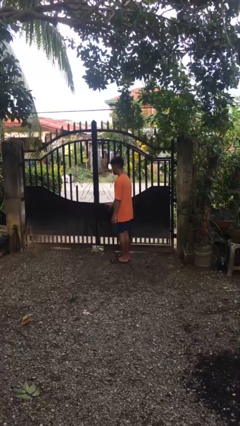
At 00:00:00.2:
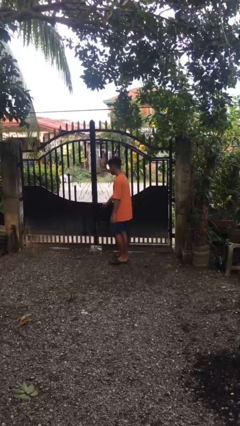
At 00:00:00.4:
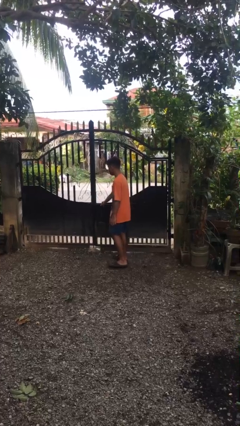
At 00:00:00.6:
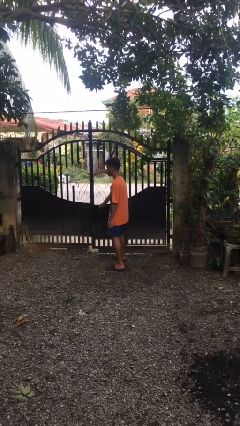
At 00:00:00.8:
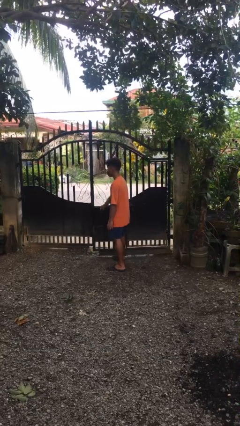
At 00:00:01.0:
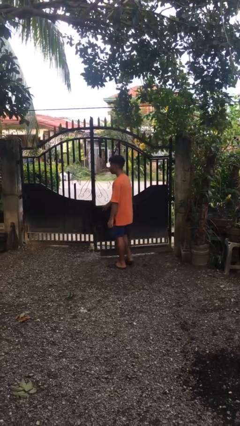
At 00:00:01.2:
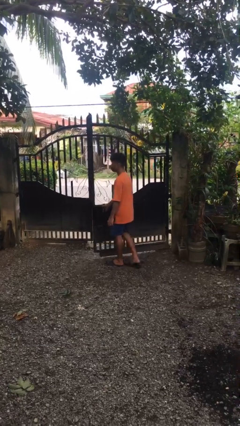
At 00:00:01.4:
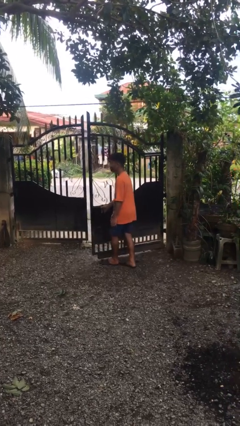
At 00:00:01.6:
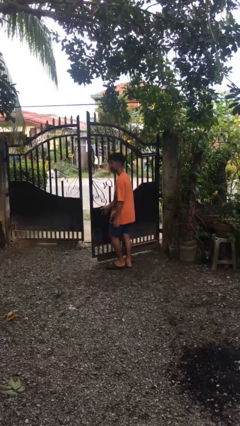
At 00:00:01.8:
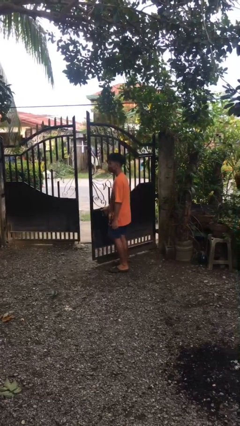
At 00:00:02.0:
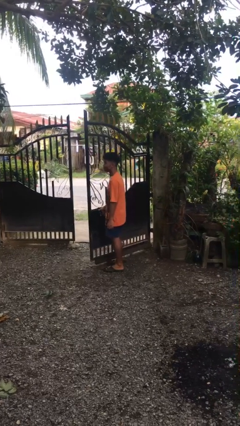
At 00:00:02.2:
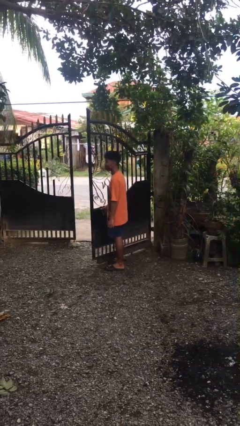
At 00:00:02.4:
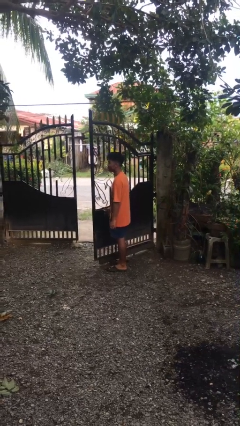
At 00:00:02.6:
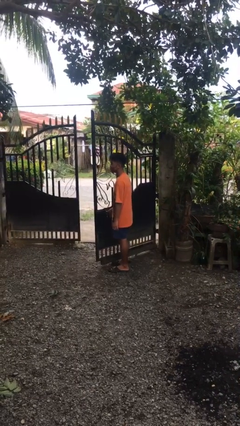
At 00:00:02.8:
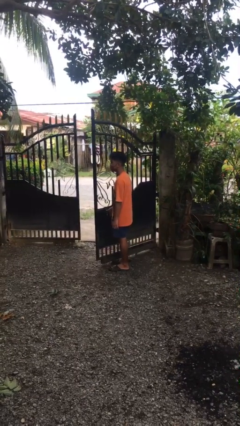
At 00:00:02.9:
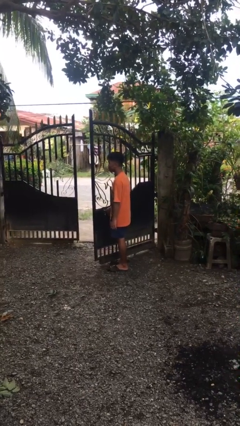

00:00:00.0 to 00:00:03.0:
person opens gate

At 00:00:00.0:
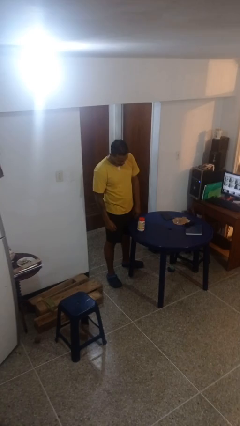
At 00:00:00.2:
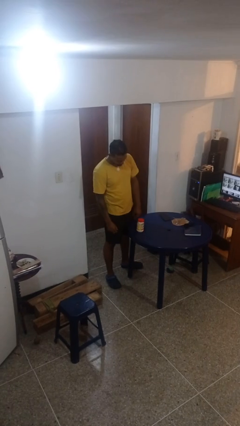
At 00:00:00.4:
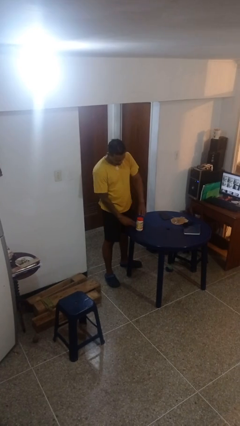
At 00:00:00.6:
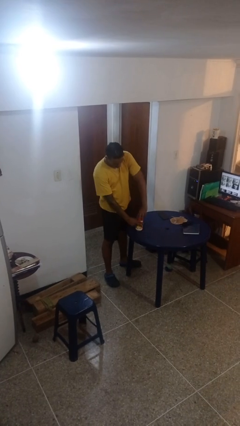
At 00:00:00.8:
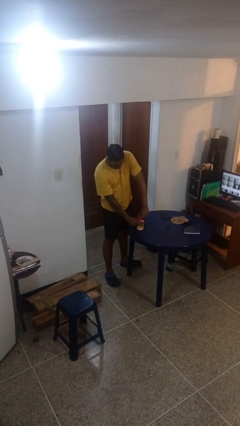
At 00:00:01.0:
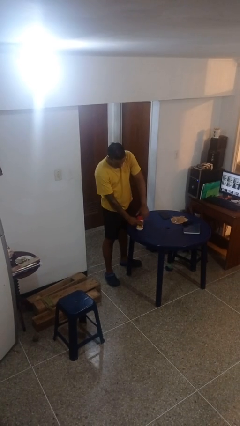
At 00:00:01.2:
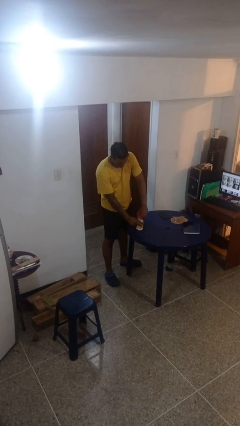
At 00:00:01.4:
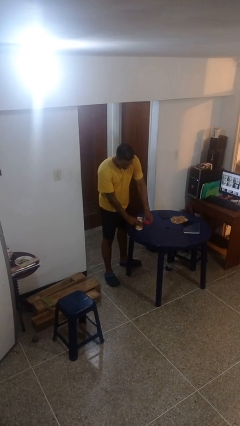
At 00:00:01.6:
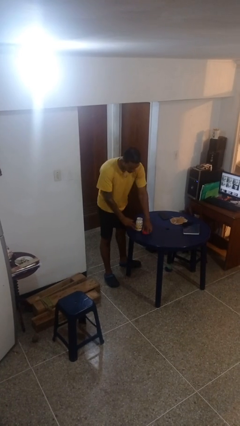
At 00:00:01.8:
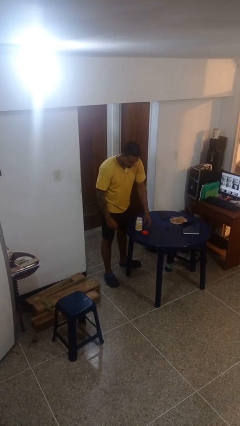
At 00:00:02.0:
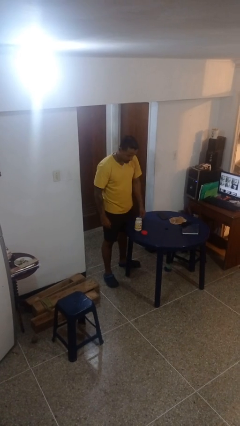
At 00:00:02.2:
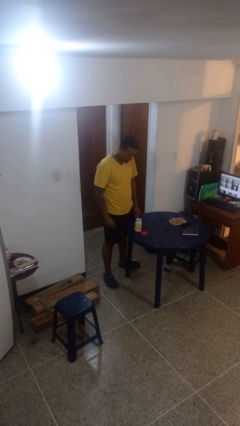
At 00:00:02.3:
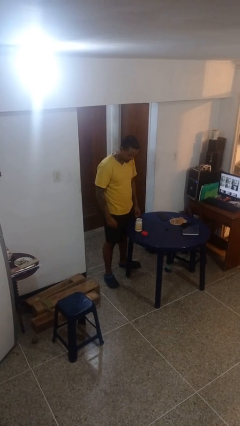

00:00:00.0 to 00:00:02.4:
person opens jar

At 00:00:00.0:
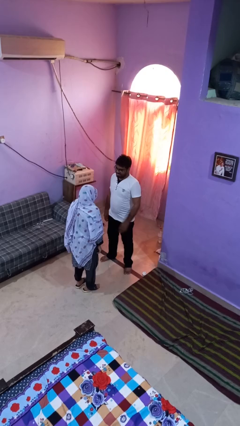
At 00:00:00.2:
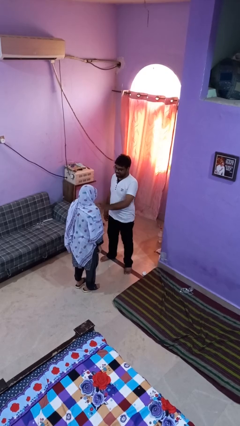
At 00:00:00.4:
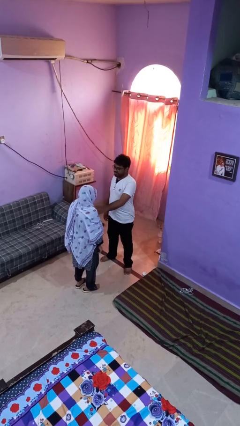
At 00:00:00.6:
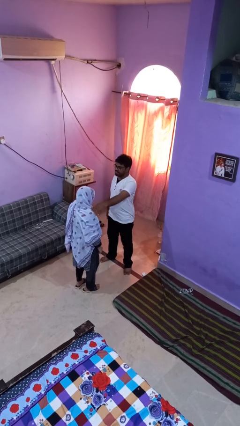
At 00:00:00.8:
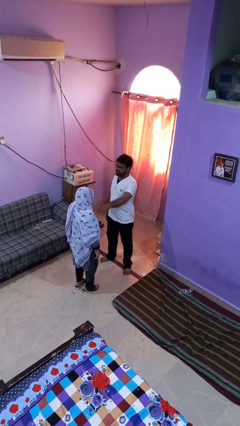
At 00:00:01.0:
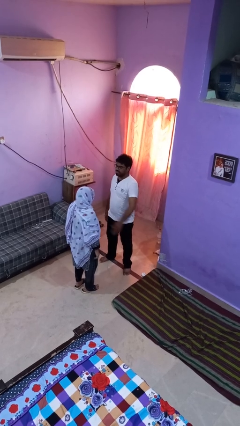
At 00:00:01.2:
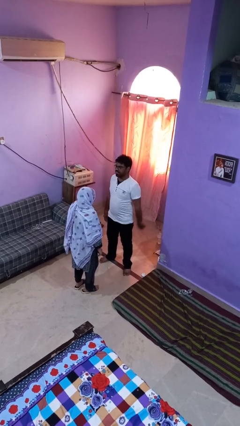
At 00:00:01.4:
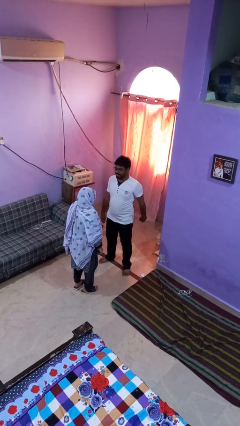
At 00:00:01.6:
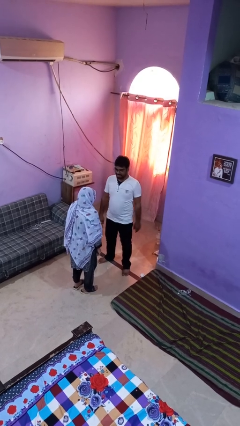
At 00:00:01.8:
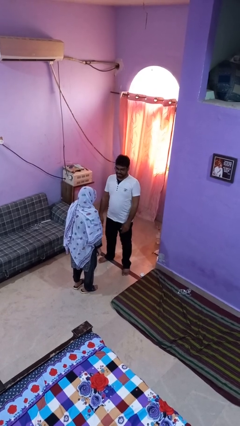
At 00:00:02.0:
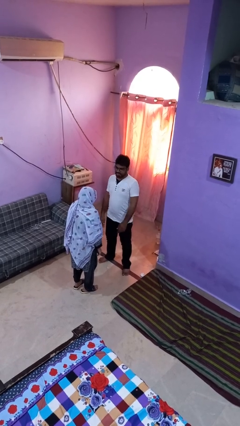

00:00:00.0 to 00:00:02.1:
person shoves person

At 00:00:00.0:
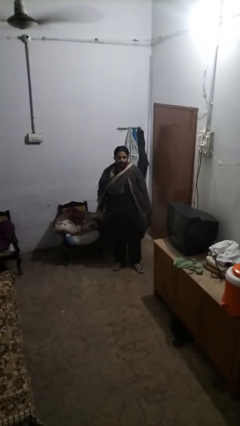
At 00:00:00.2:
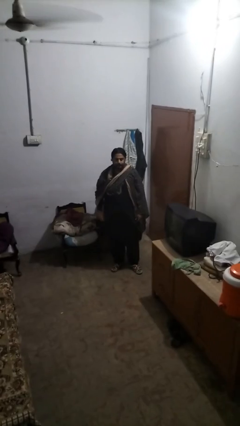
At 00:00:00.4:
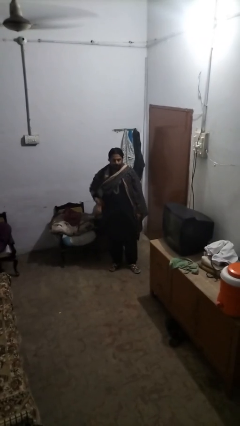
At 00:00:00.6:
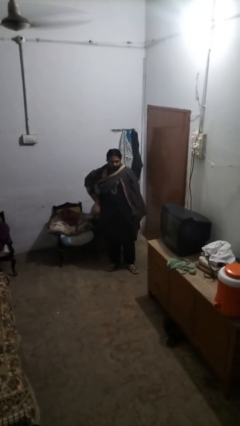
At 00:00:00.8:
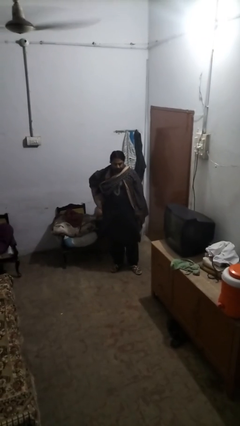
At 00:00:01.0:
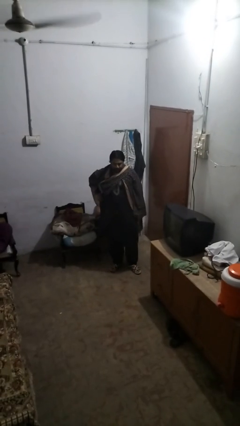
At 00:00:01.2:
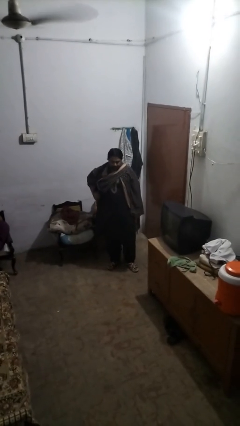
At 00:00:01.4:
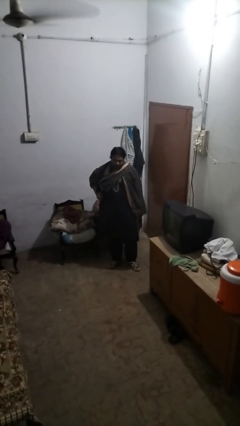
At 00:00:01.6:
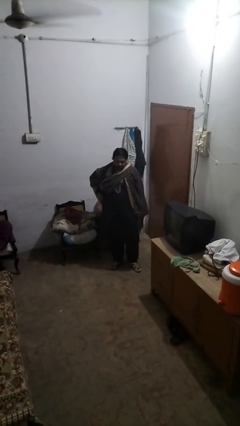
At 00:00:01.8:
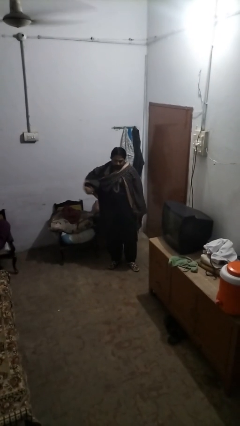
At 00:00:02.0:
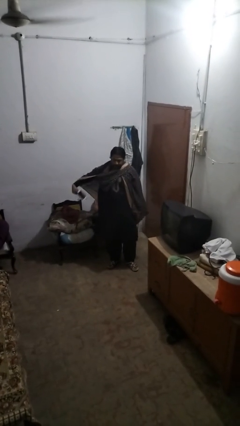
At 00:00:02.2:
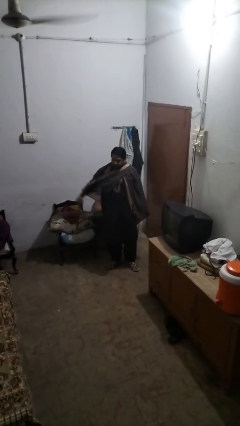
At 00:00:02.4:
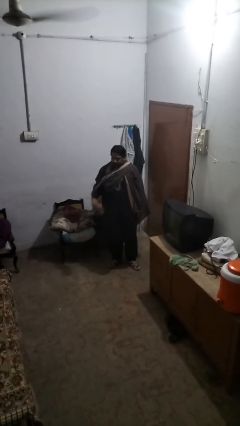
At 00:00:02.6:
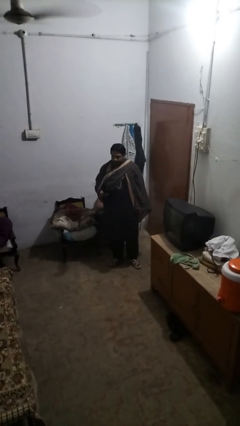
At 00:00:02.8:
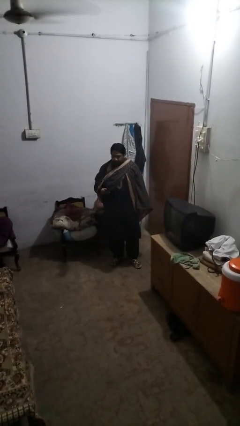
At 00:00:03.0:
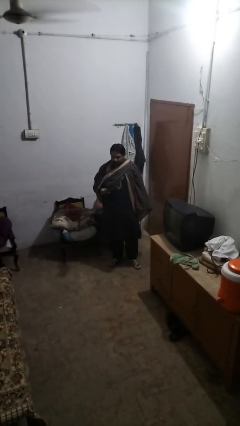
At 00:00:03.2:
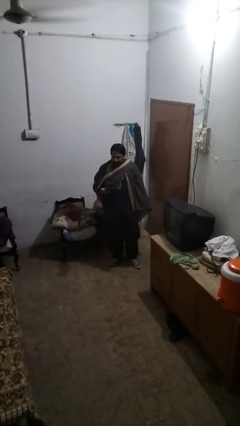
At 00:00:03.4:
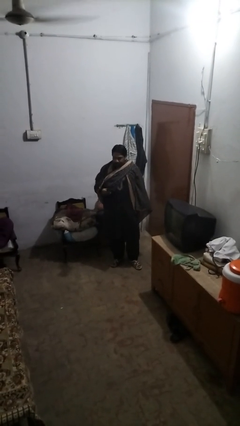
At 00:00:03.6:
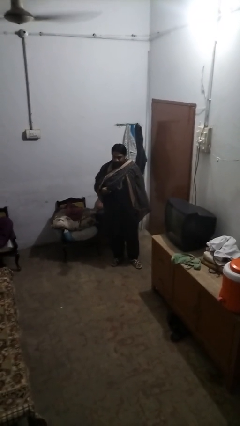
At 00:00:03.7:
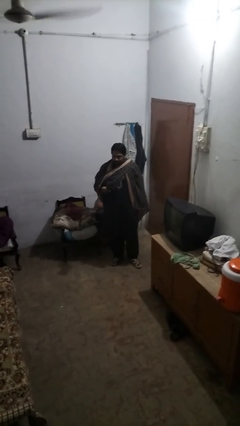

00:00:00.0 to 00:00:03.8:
person takes phone from pocket

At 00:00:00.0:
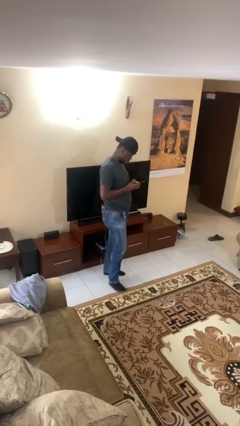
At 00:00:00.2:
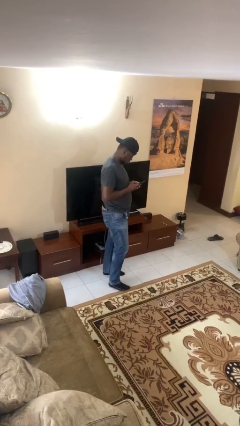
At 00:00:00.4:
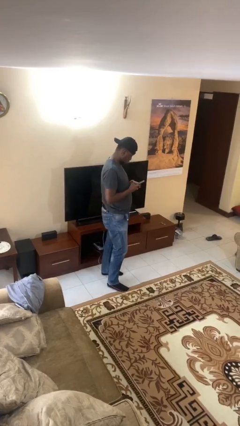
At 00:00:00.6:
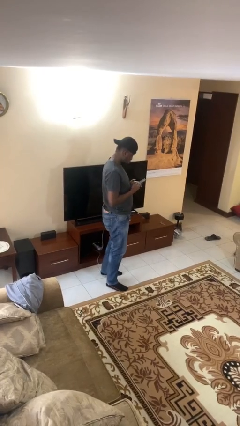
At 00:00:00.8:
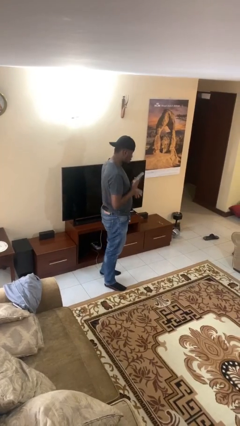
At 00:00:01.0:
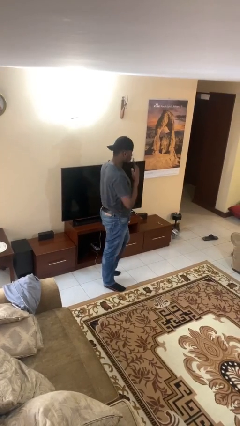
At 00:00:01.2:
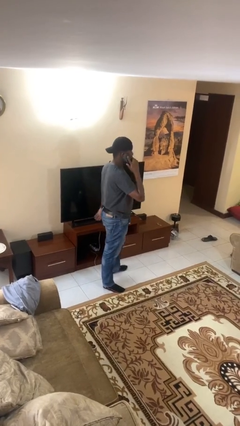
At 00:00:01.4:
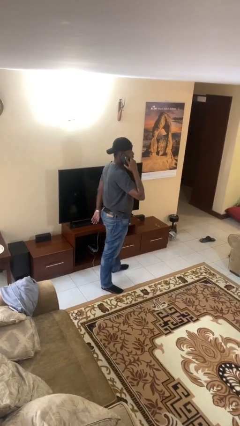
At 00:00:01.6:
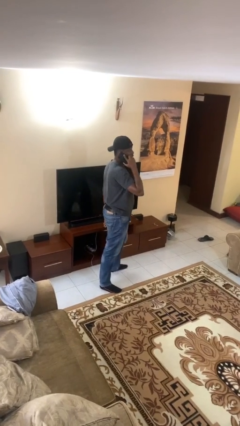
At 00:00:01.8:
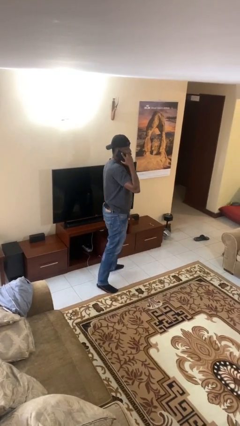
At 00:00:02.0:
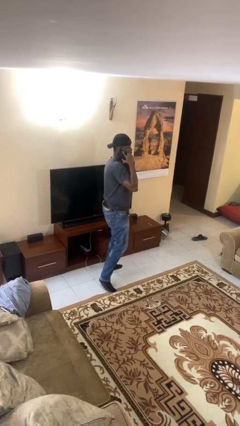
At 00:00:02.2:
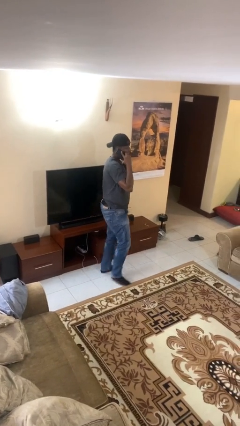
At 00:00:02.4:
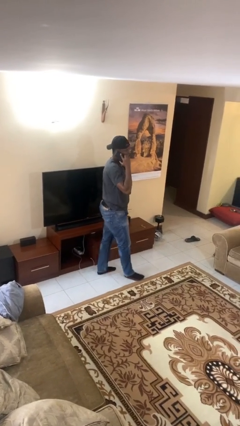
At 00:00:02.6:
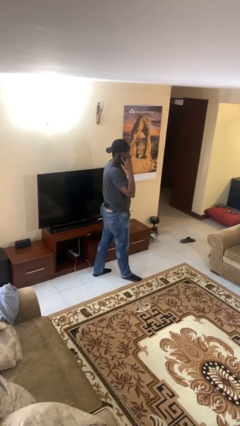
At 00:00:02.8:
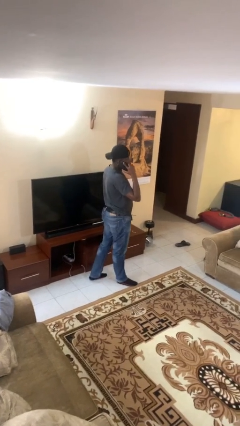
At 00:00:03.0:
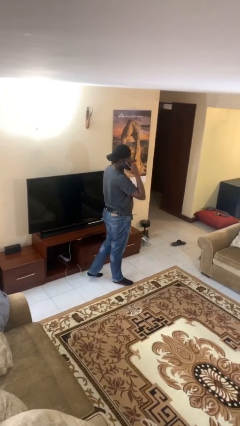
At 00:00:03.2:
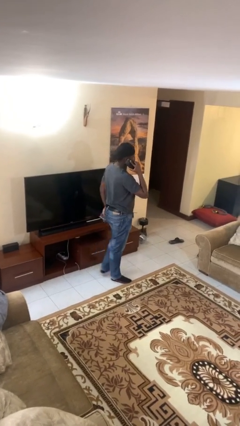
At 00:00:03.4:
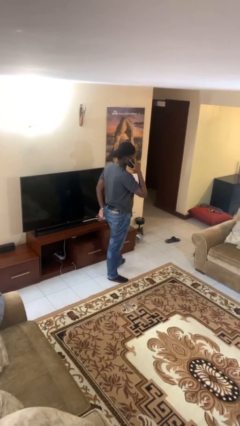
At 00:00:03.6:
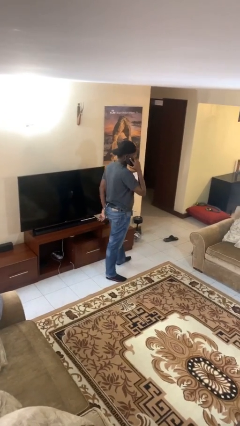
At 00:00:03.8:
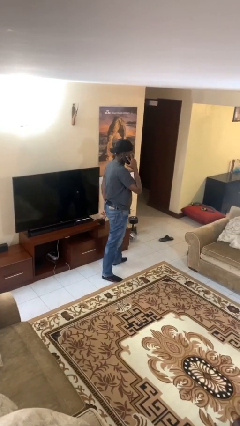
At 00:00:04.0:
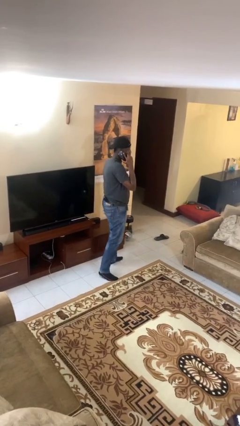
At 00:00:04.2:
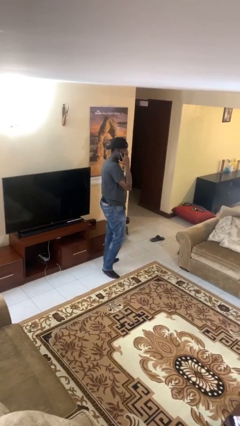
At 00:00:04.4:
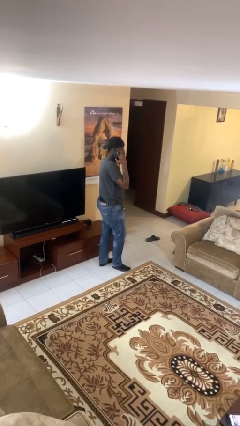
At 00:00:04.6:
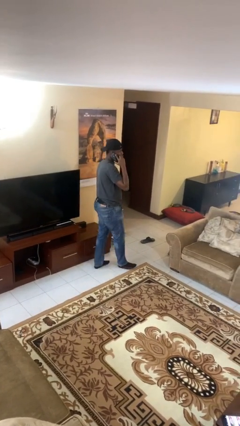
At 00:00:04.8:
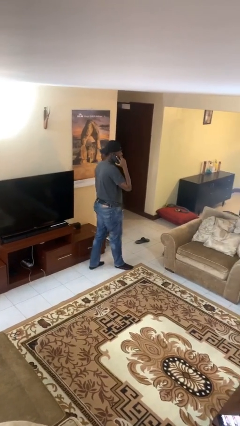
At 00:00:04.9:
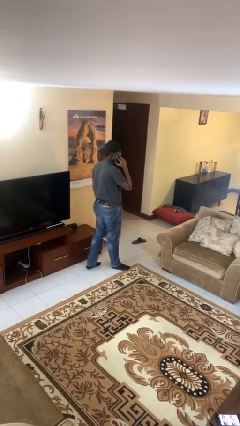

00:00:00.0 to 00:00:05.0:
person talks on phone

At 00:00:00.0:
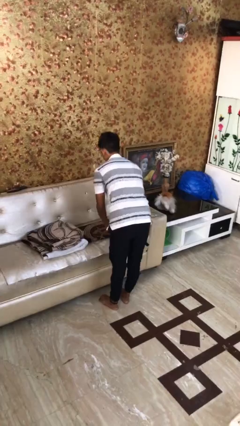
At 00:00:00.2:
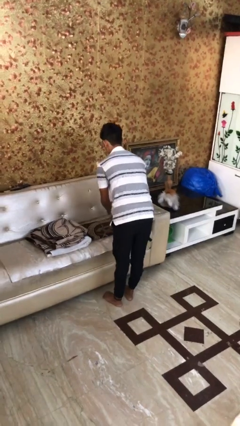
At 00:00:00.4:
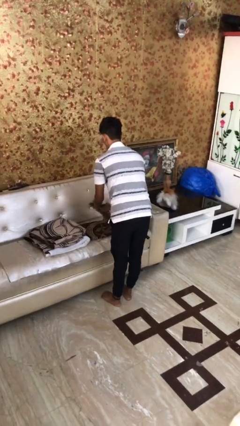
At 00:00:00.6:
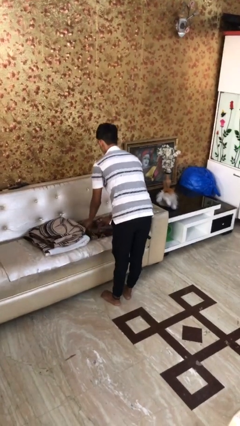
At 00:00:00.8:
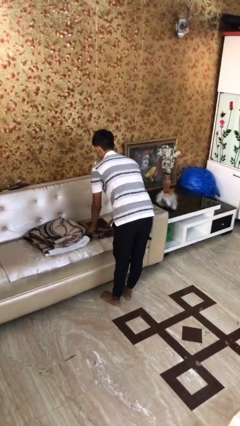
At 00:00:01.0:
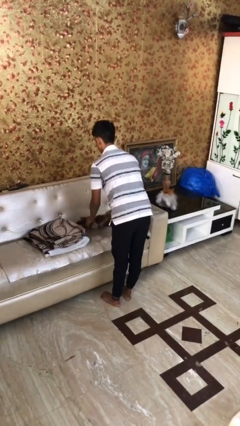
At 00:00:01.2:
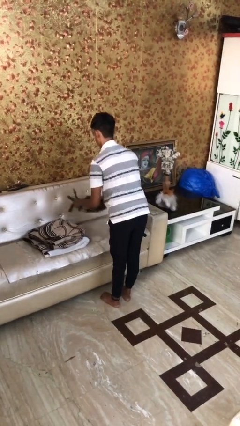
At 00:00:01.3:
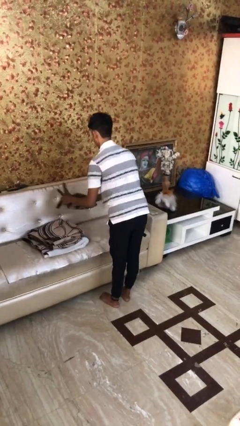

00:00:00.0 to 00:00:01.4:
person folds towel
